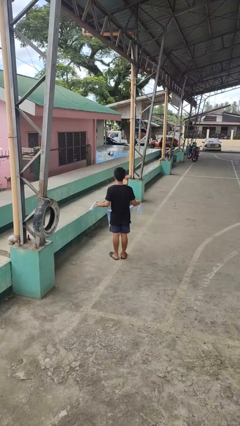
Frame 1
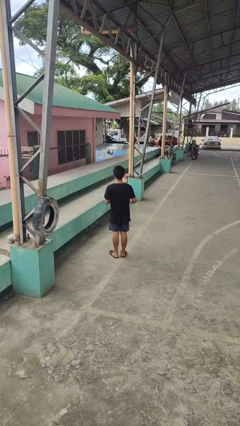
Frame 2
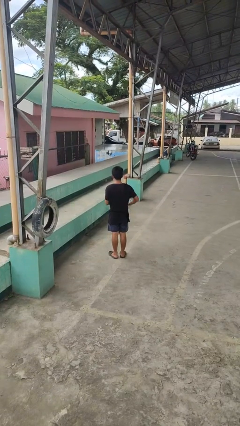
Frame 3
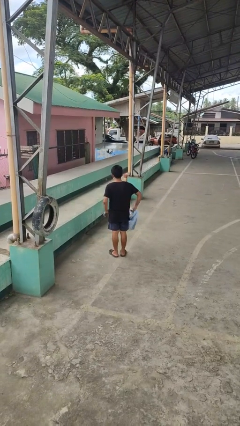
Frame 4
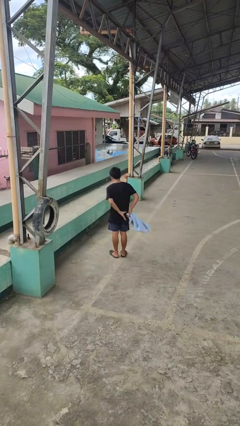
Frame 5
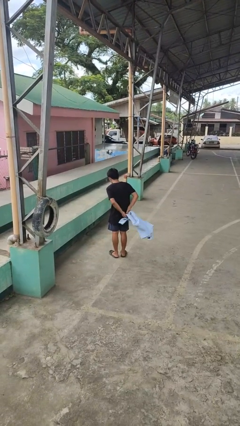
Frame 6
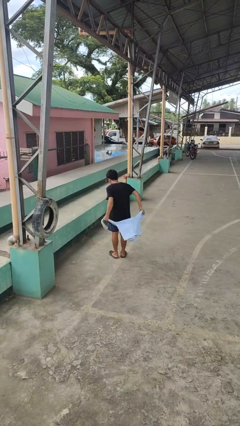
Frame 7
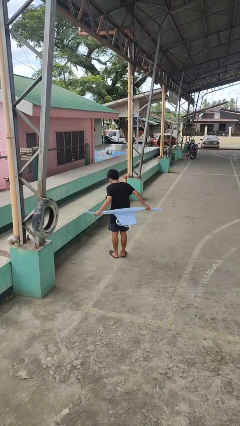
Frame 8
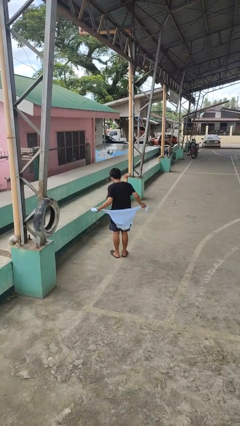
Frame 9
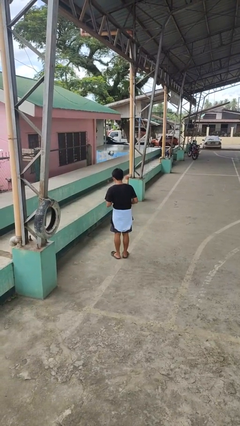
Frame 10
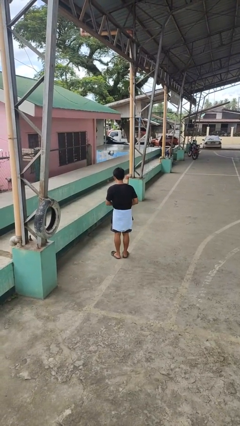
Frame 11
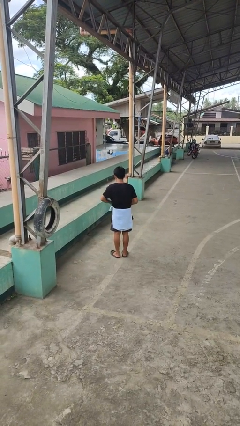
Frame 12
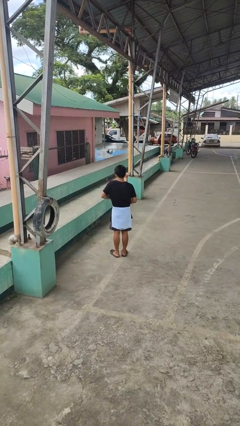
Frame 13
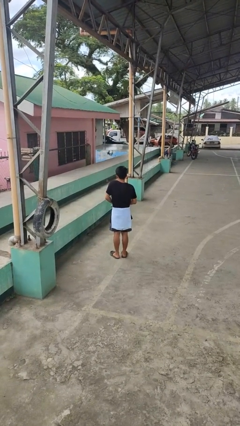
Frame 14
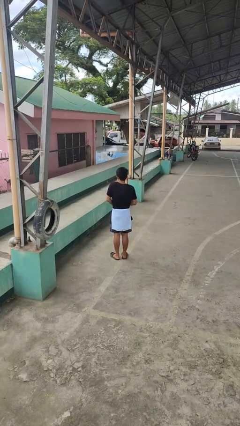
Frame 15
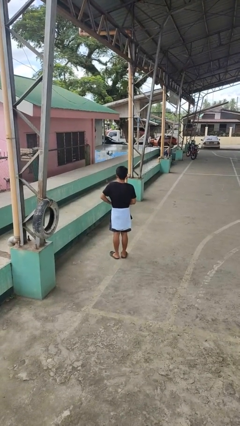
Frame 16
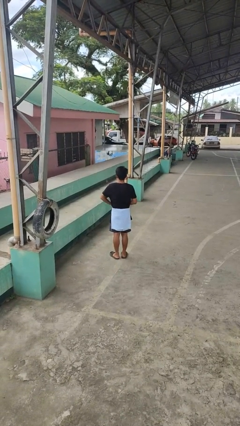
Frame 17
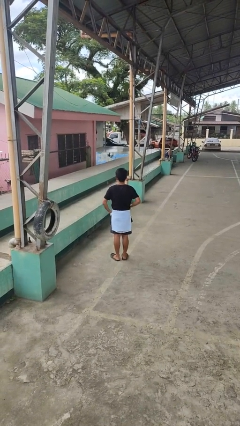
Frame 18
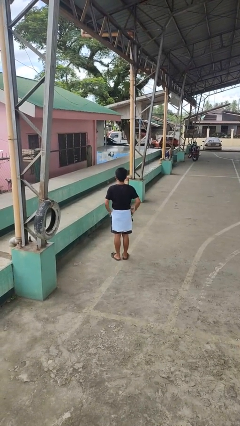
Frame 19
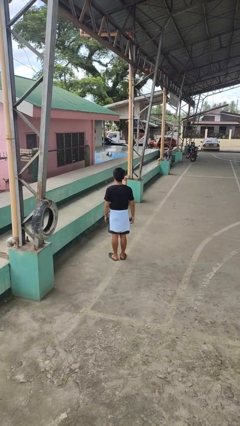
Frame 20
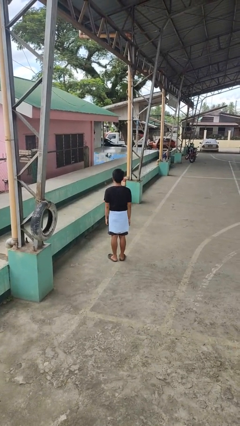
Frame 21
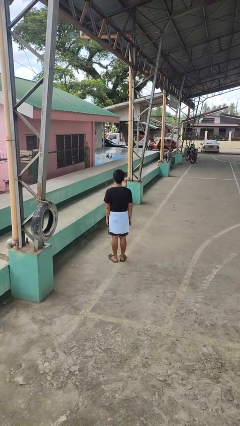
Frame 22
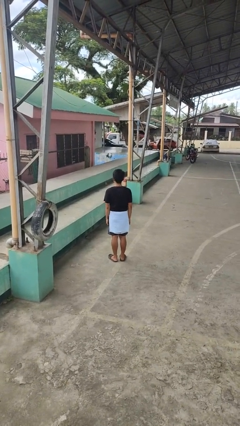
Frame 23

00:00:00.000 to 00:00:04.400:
person ties jacket around waist

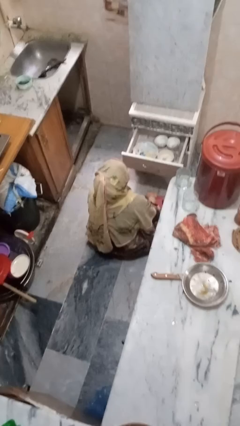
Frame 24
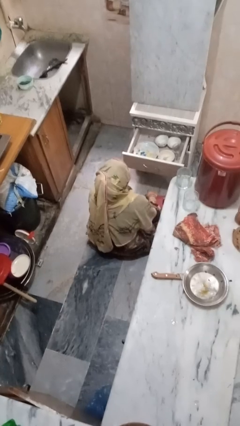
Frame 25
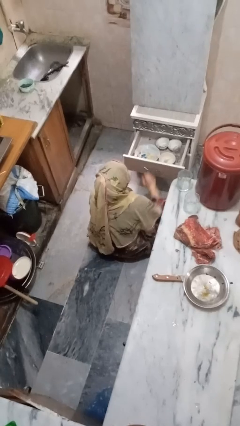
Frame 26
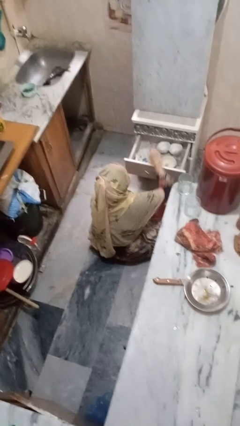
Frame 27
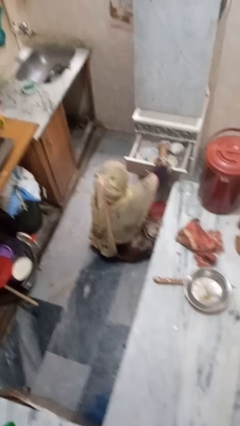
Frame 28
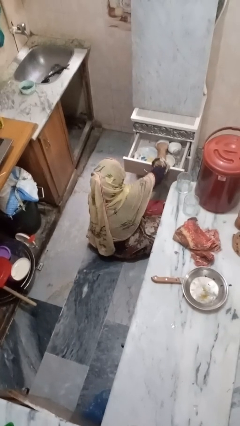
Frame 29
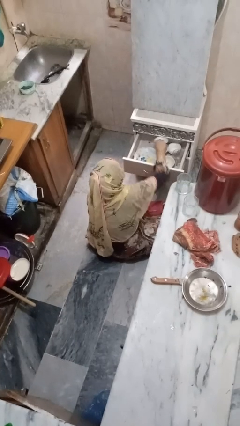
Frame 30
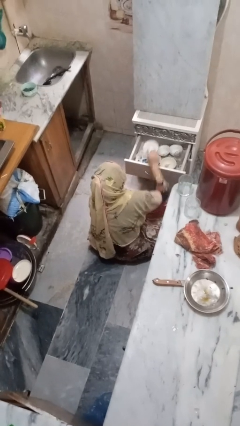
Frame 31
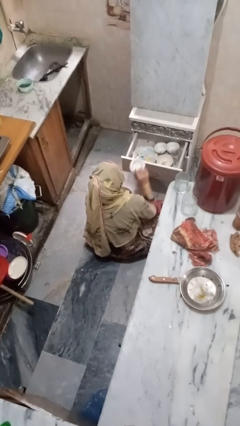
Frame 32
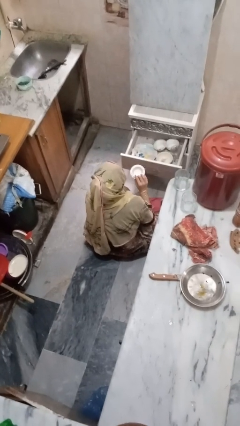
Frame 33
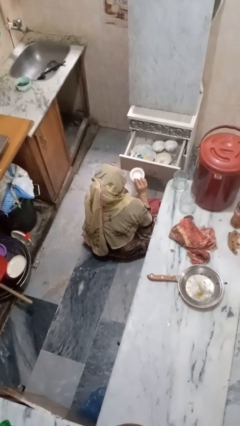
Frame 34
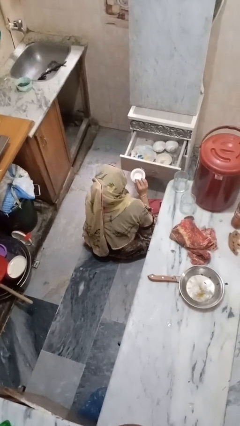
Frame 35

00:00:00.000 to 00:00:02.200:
person takes object from kitchen drawer

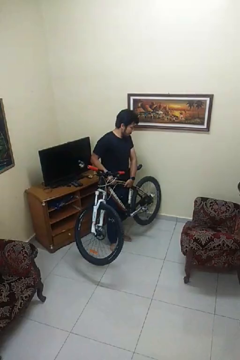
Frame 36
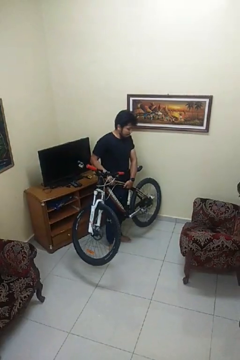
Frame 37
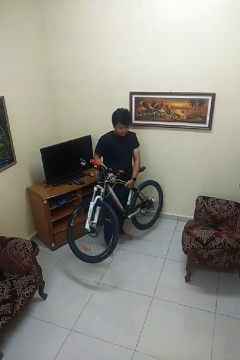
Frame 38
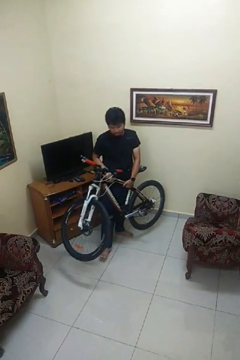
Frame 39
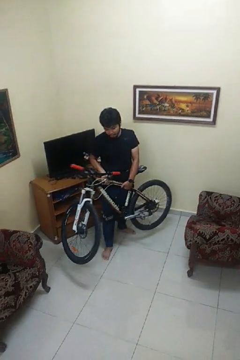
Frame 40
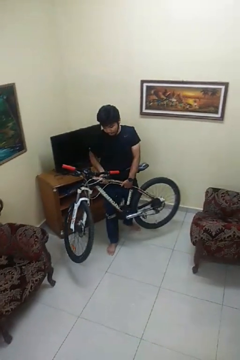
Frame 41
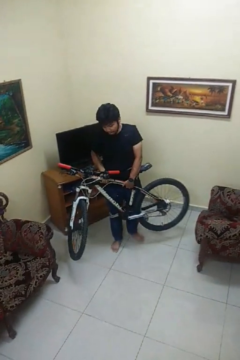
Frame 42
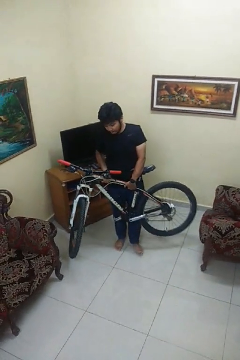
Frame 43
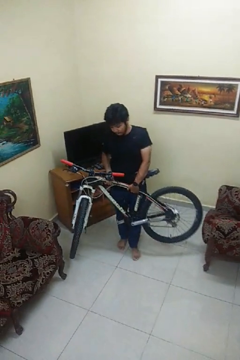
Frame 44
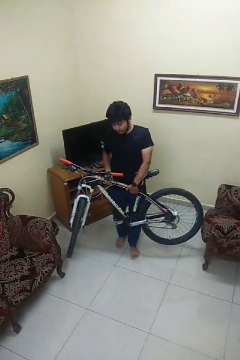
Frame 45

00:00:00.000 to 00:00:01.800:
person carries bicycle

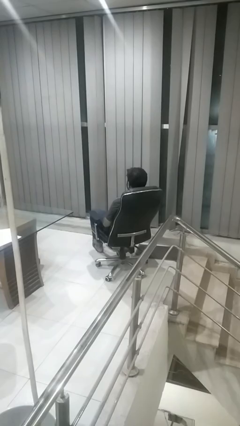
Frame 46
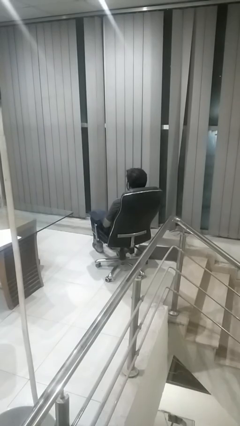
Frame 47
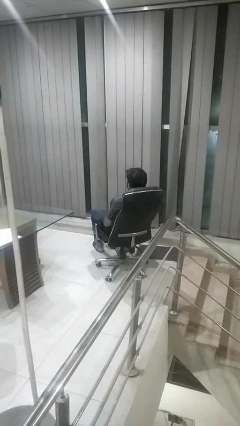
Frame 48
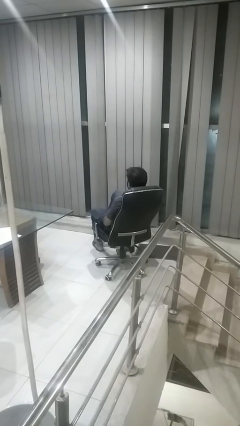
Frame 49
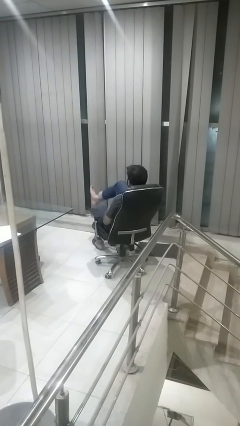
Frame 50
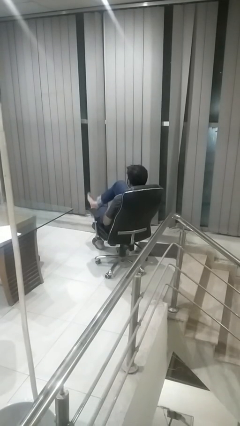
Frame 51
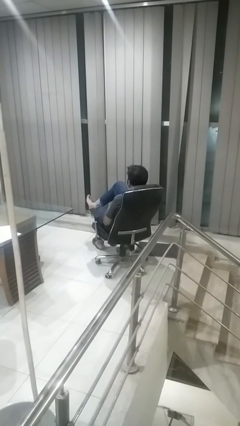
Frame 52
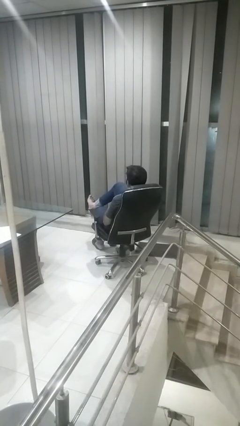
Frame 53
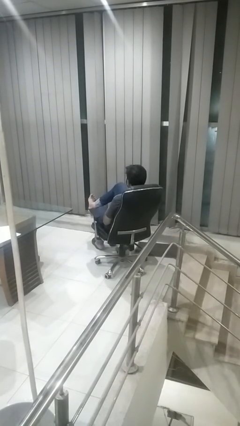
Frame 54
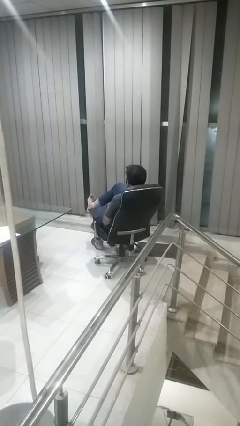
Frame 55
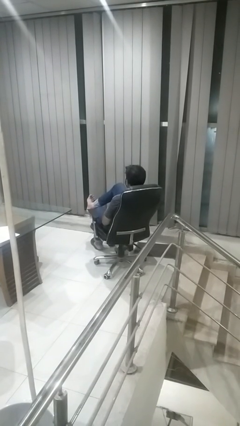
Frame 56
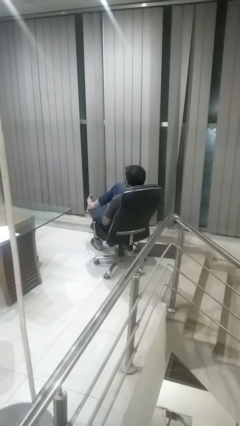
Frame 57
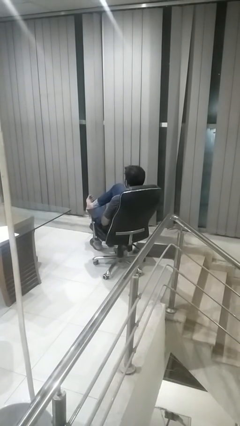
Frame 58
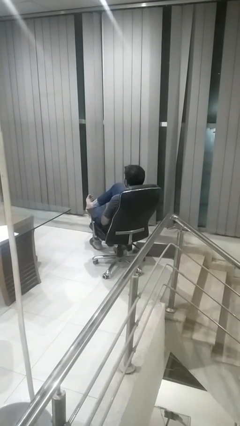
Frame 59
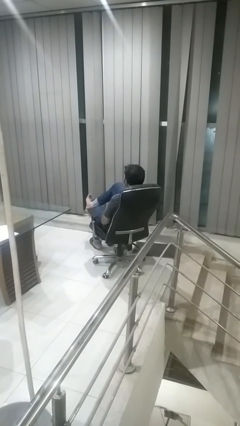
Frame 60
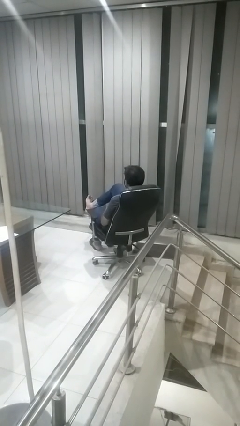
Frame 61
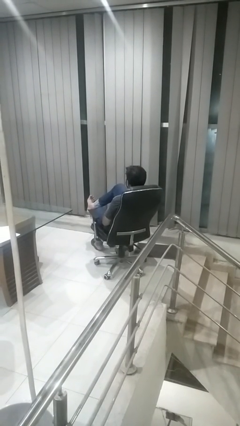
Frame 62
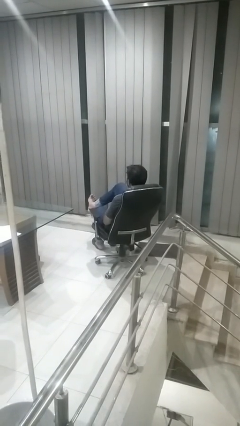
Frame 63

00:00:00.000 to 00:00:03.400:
person crosses legs

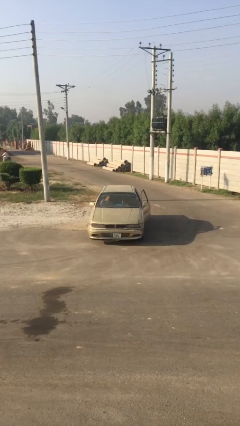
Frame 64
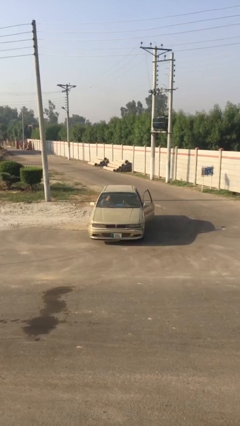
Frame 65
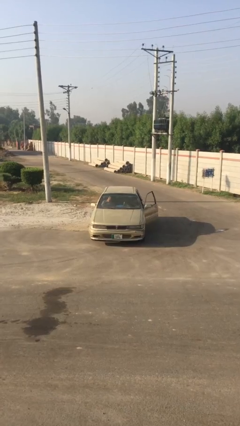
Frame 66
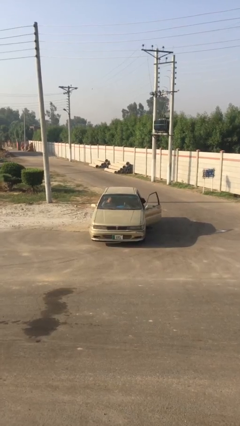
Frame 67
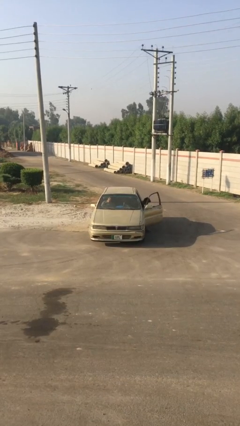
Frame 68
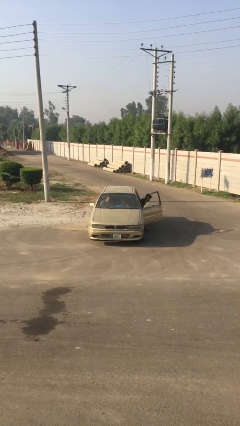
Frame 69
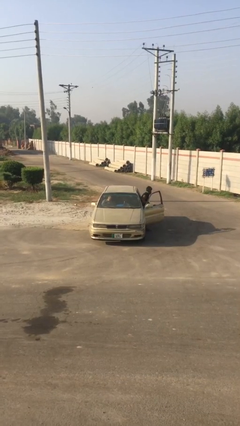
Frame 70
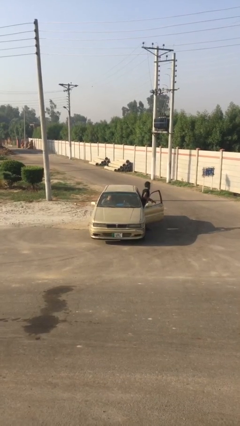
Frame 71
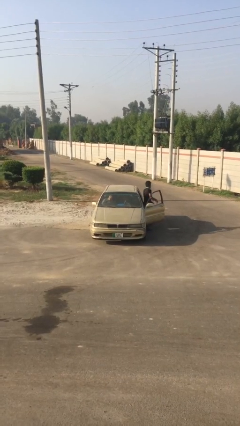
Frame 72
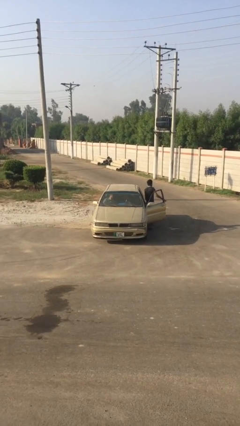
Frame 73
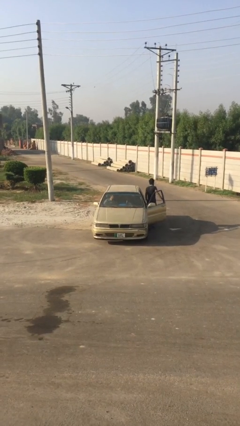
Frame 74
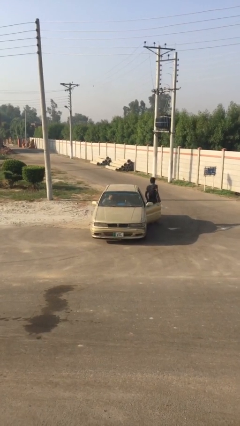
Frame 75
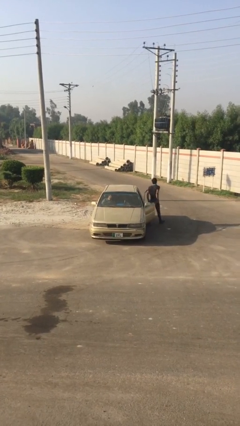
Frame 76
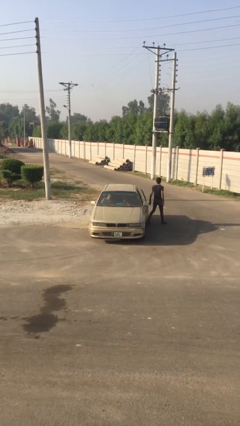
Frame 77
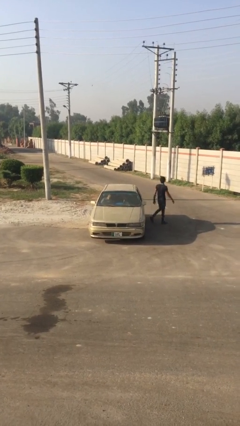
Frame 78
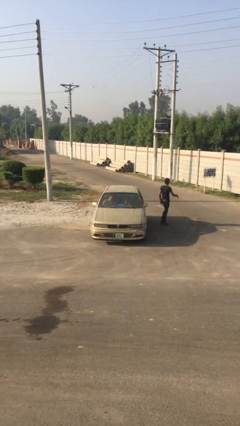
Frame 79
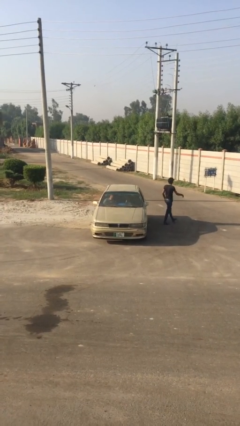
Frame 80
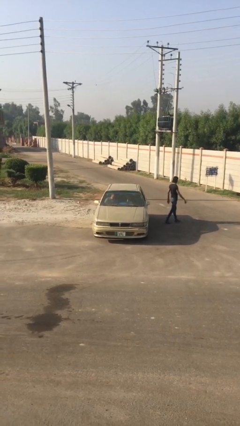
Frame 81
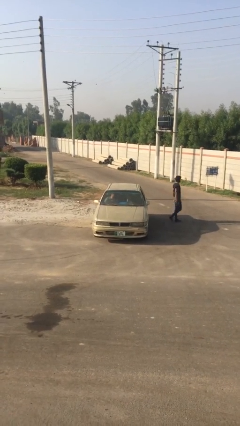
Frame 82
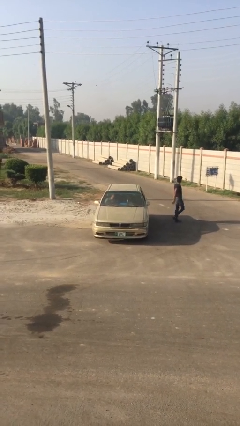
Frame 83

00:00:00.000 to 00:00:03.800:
car drops off person

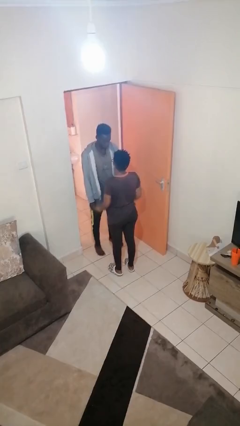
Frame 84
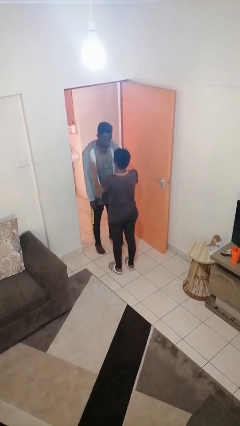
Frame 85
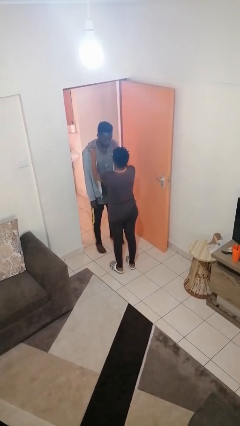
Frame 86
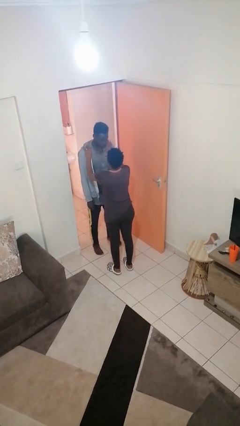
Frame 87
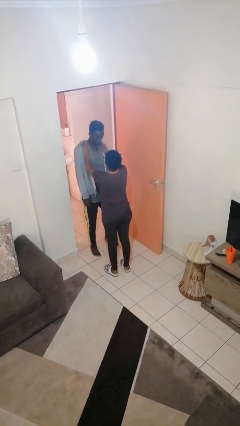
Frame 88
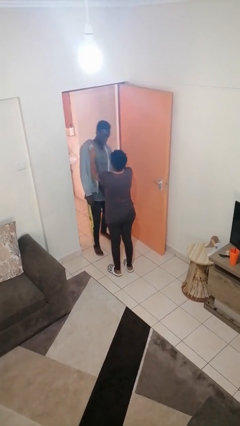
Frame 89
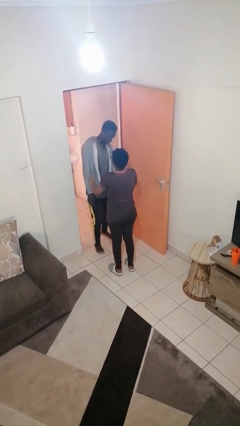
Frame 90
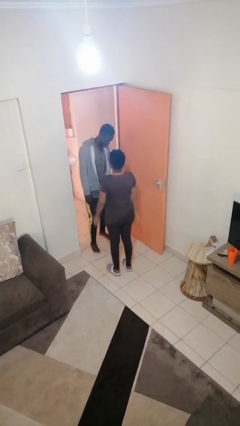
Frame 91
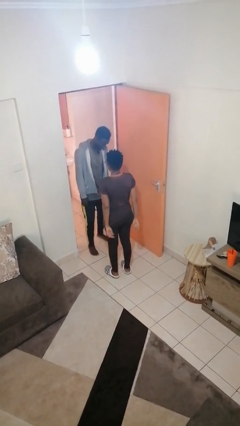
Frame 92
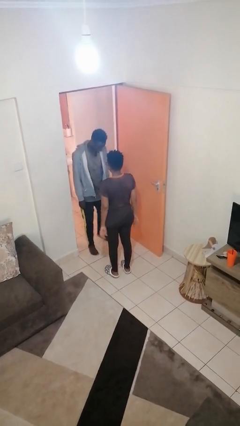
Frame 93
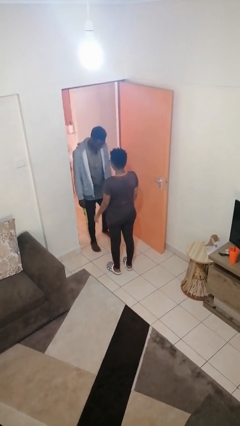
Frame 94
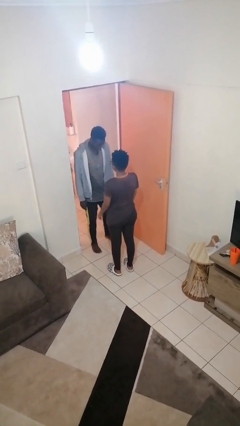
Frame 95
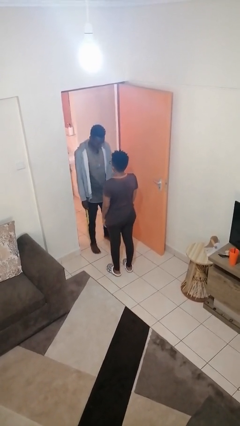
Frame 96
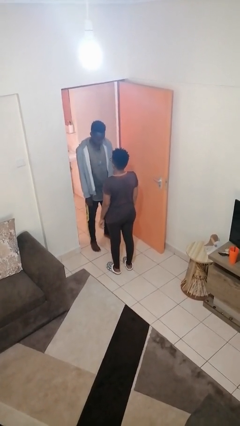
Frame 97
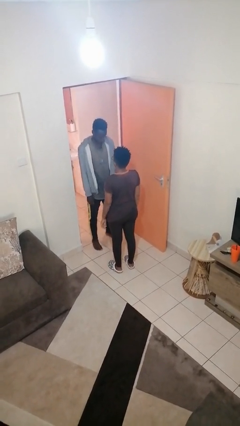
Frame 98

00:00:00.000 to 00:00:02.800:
person shoves person
